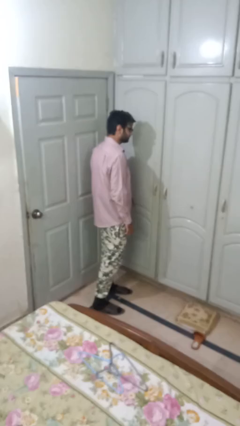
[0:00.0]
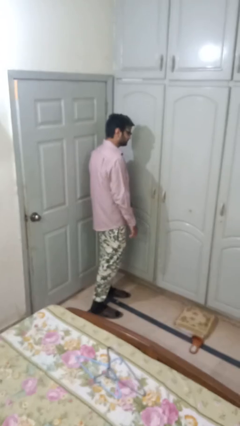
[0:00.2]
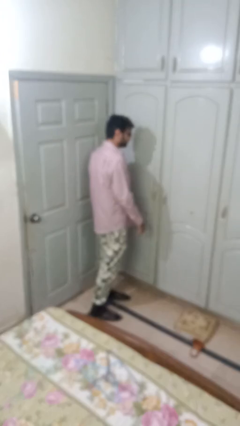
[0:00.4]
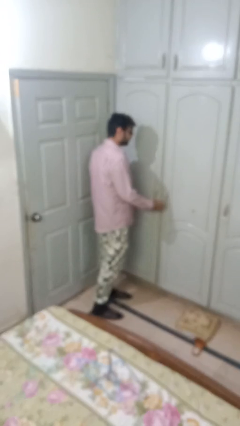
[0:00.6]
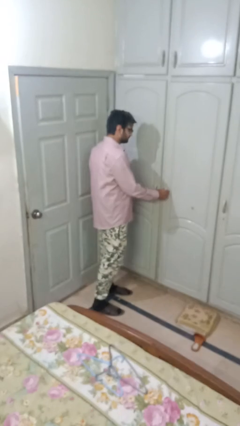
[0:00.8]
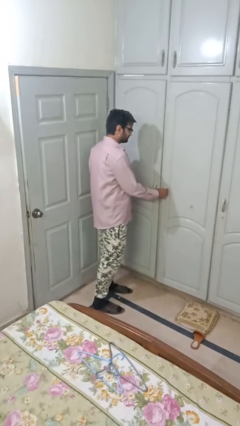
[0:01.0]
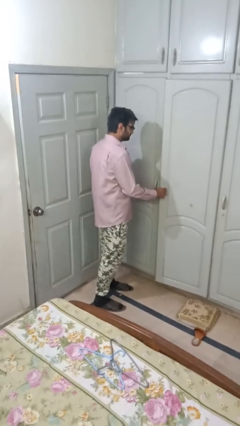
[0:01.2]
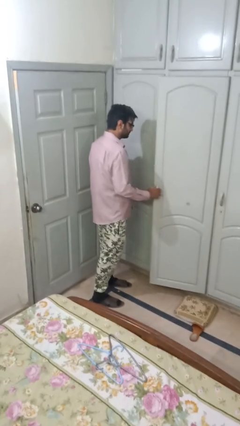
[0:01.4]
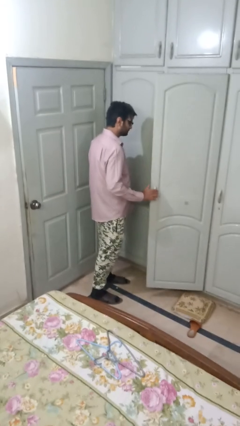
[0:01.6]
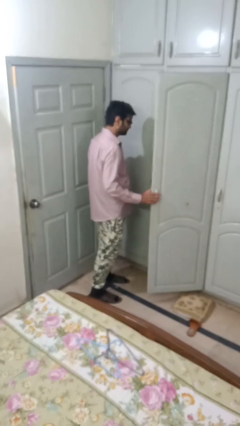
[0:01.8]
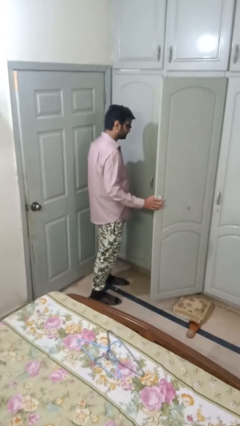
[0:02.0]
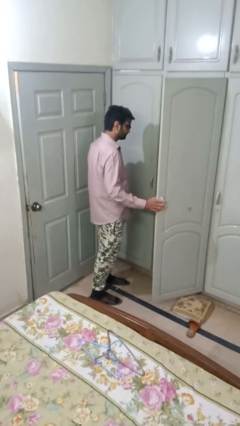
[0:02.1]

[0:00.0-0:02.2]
person opens closet door

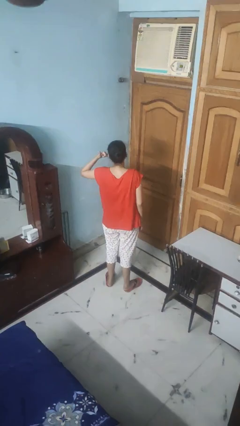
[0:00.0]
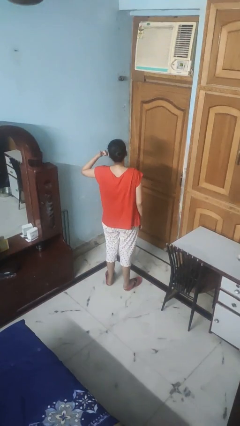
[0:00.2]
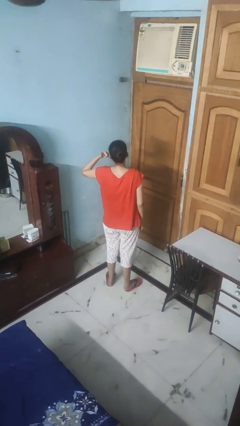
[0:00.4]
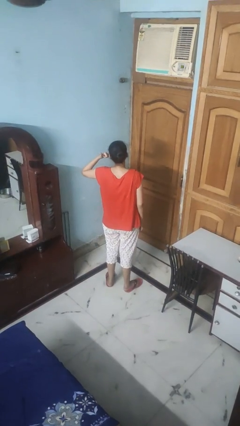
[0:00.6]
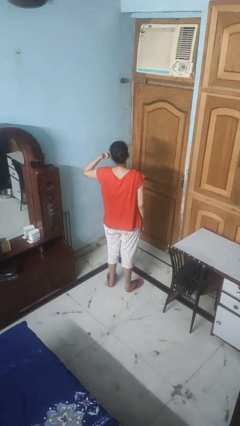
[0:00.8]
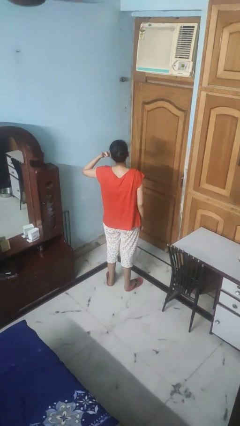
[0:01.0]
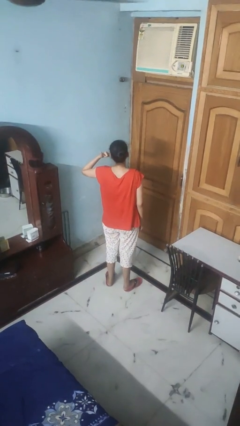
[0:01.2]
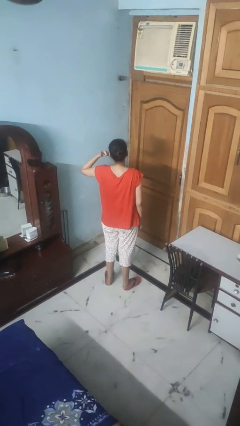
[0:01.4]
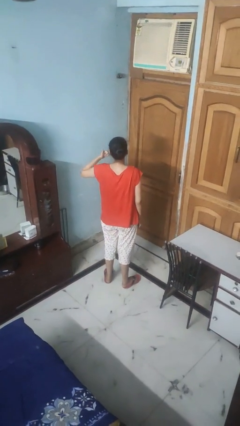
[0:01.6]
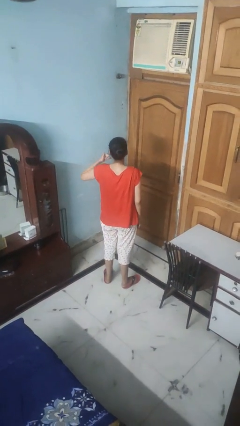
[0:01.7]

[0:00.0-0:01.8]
person gestures call me

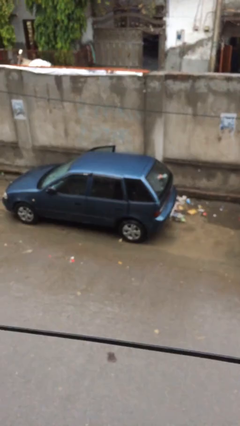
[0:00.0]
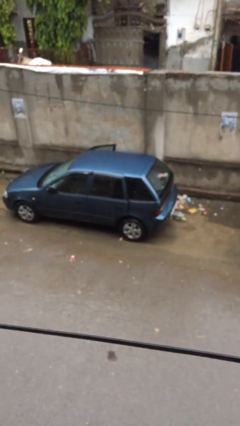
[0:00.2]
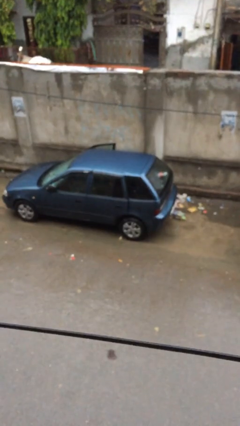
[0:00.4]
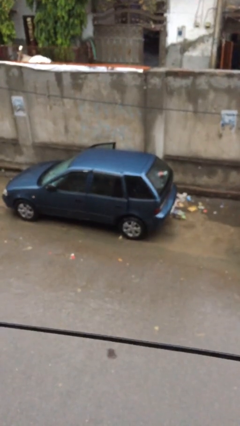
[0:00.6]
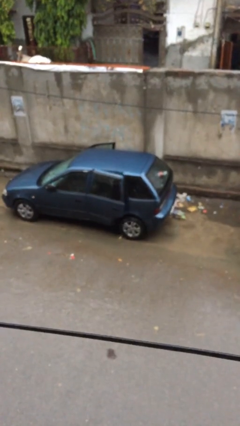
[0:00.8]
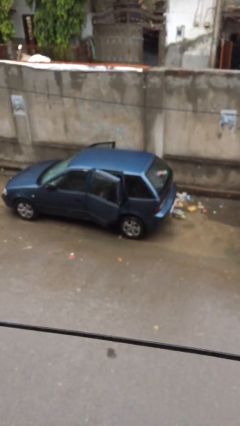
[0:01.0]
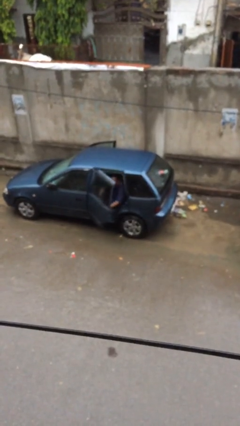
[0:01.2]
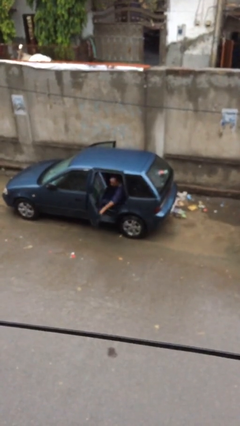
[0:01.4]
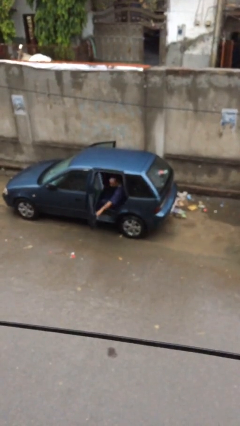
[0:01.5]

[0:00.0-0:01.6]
person opens car door

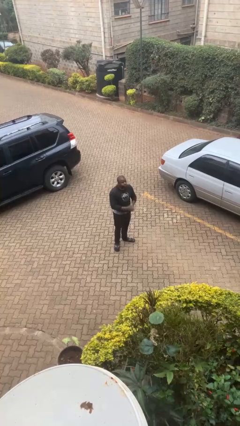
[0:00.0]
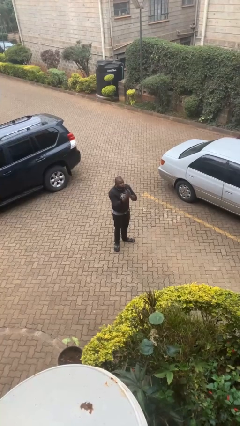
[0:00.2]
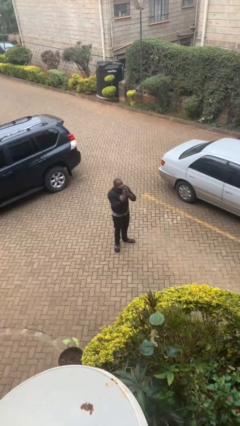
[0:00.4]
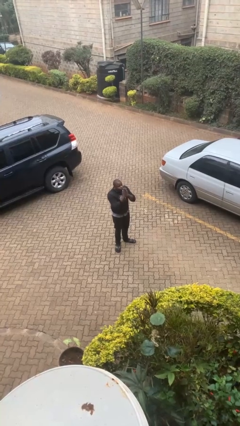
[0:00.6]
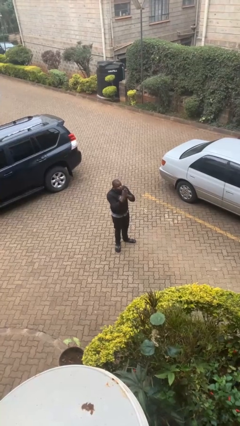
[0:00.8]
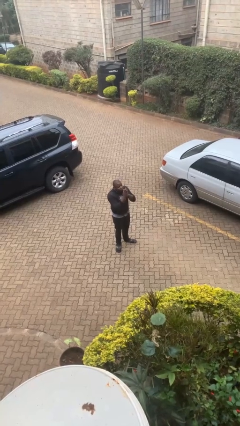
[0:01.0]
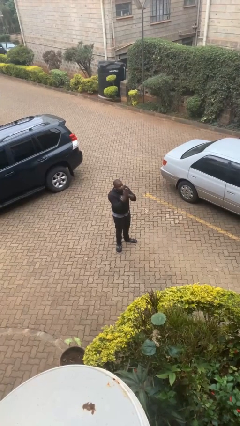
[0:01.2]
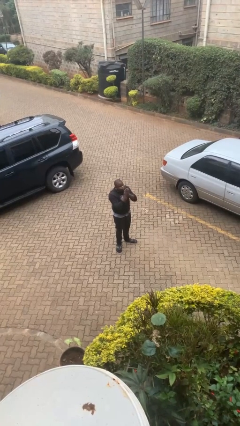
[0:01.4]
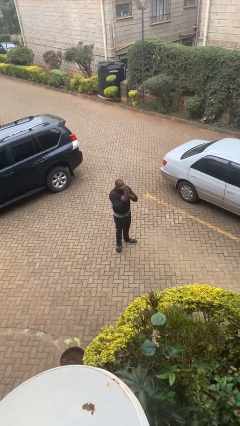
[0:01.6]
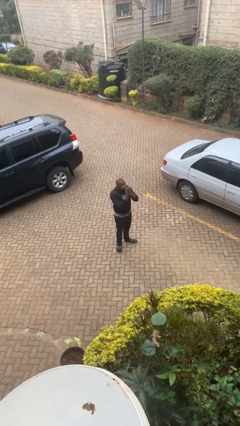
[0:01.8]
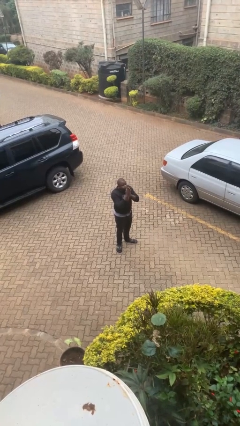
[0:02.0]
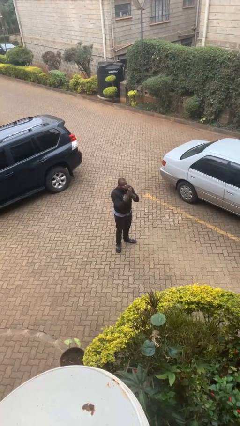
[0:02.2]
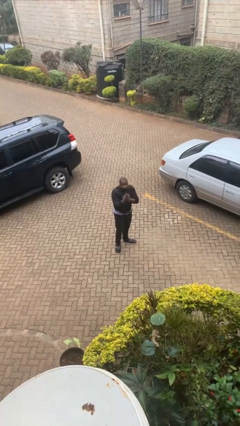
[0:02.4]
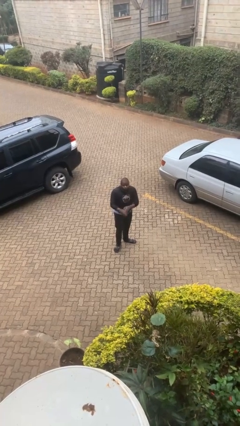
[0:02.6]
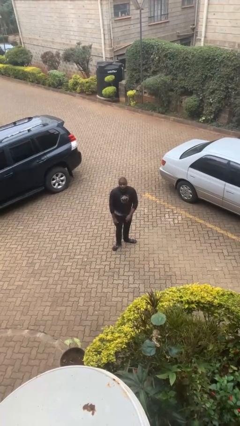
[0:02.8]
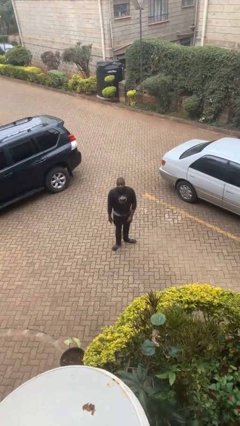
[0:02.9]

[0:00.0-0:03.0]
person blows into hands

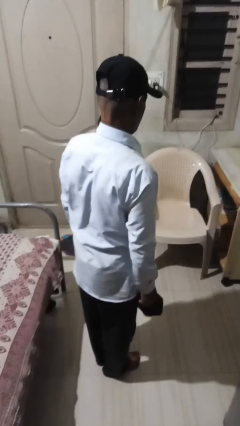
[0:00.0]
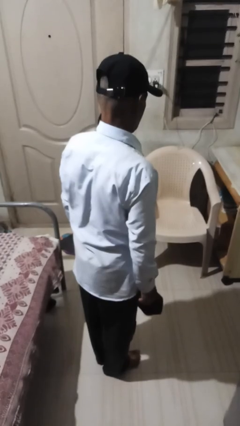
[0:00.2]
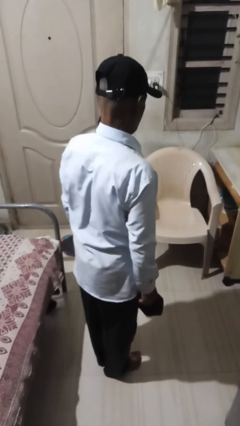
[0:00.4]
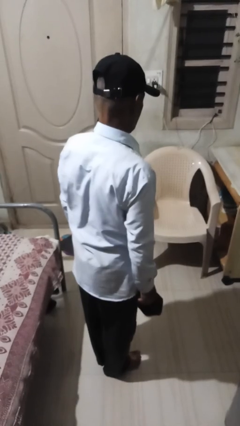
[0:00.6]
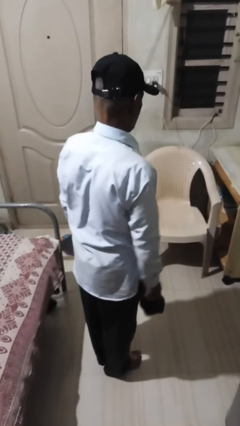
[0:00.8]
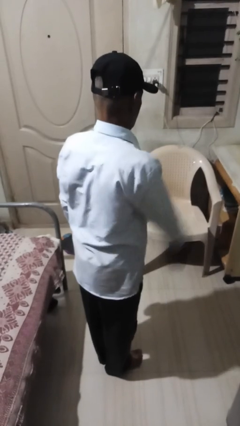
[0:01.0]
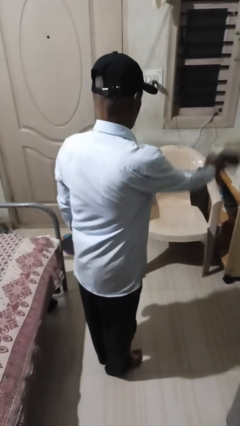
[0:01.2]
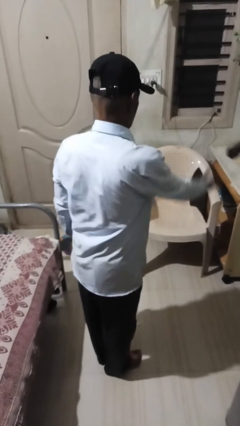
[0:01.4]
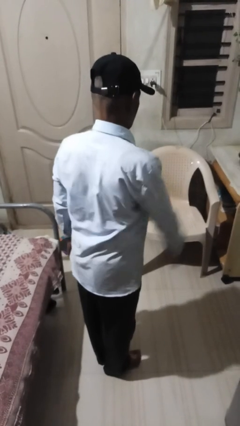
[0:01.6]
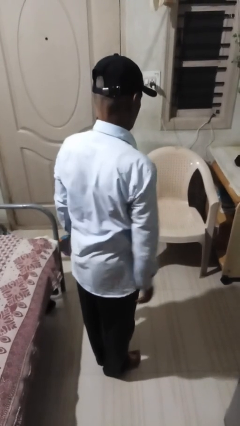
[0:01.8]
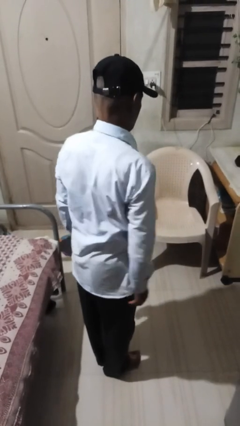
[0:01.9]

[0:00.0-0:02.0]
person throws object on table

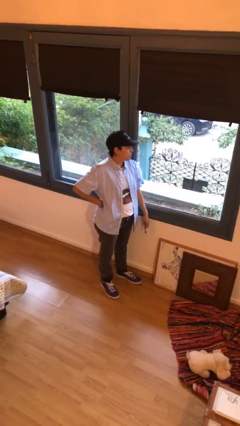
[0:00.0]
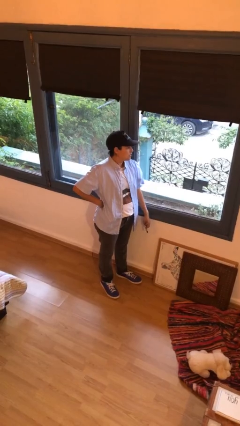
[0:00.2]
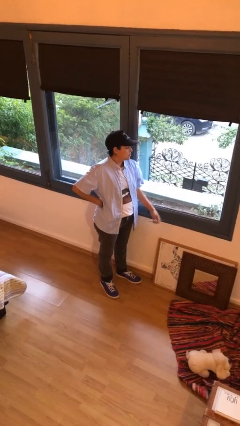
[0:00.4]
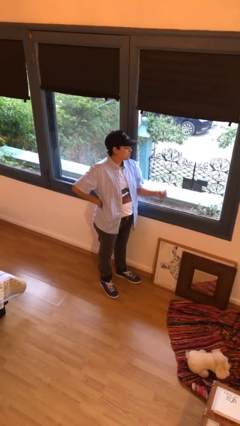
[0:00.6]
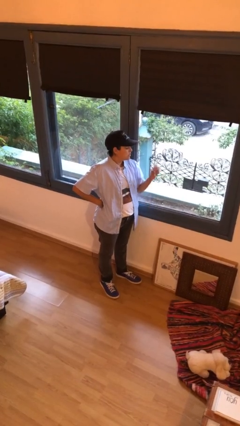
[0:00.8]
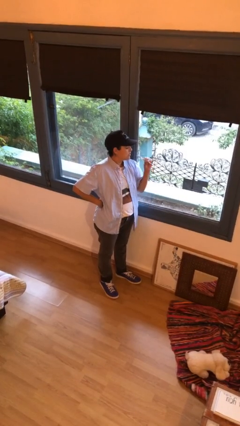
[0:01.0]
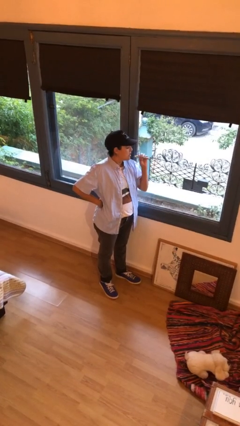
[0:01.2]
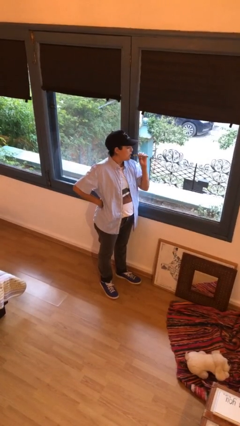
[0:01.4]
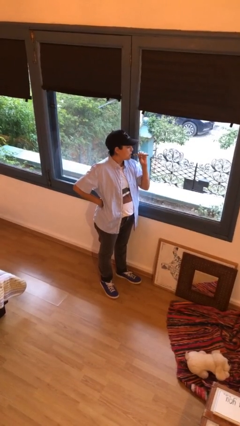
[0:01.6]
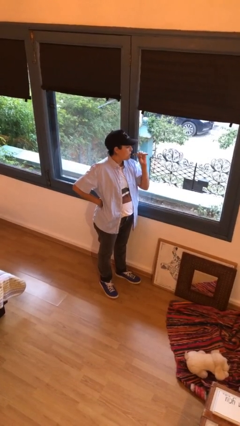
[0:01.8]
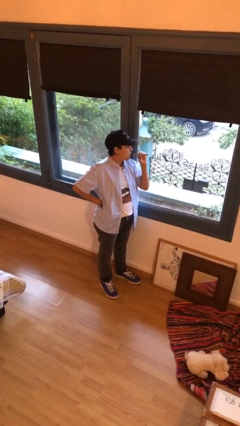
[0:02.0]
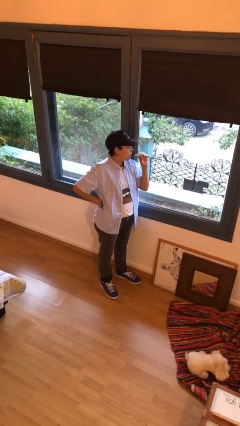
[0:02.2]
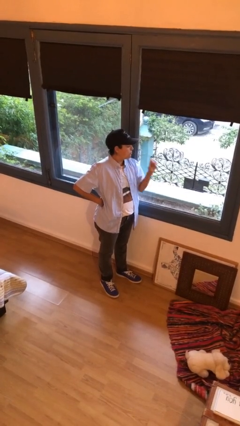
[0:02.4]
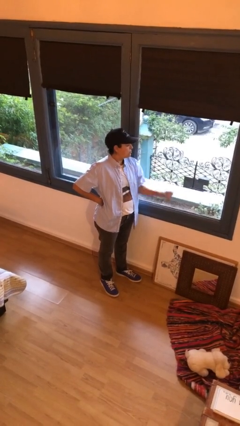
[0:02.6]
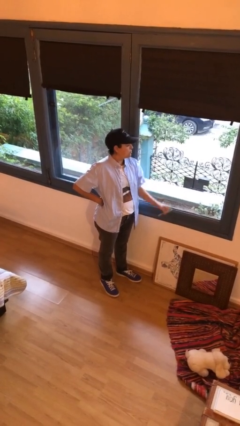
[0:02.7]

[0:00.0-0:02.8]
person vapes

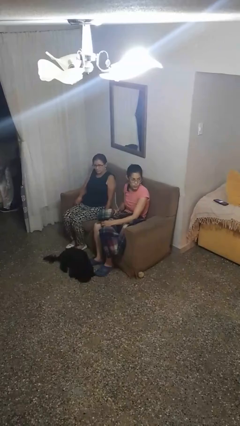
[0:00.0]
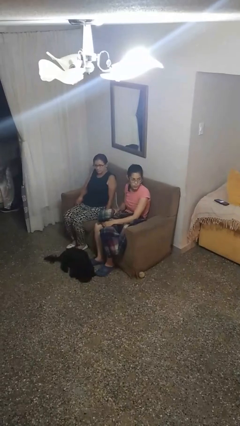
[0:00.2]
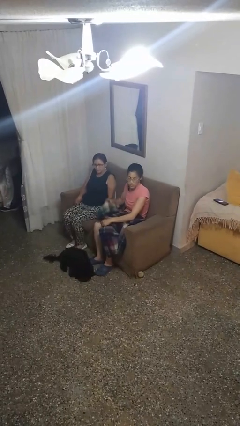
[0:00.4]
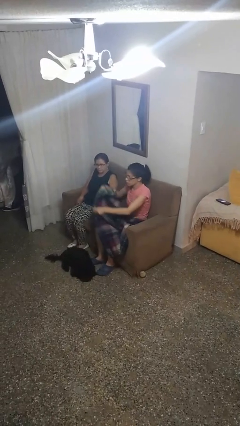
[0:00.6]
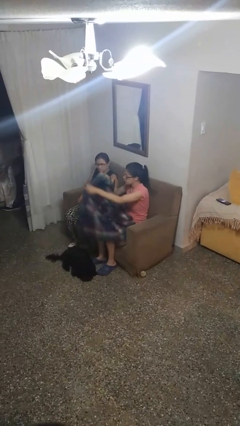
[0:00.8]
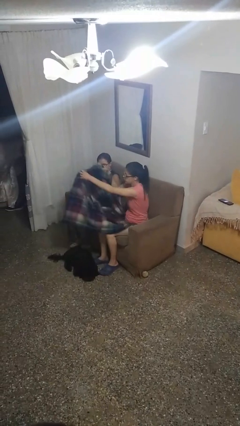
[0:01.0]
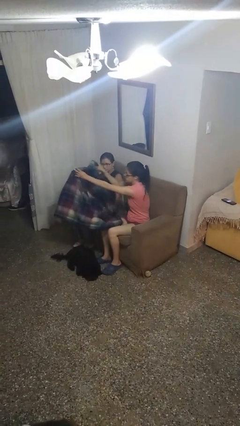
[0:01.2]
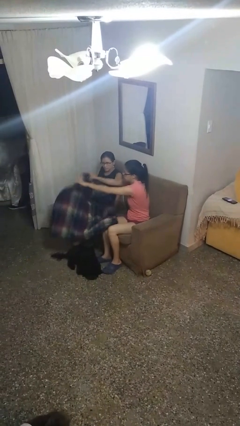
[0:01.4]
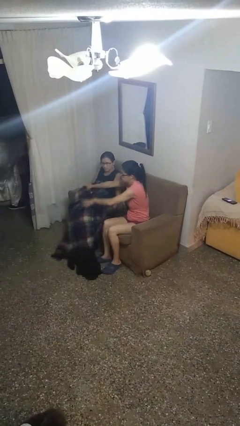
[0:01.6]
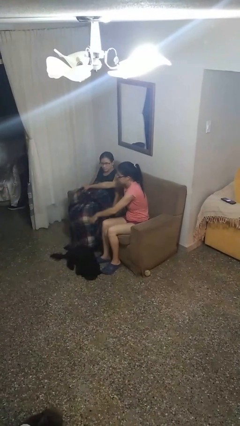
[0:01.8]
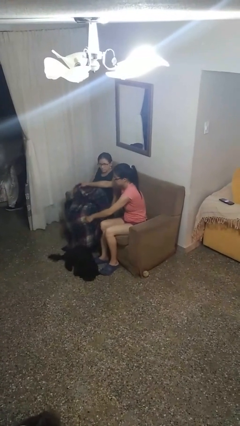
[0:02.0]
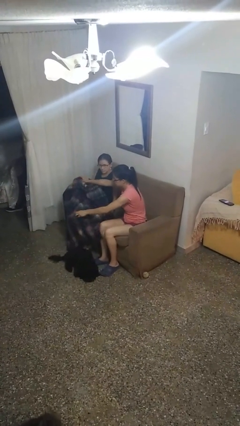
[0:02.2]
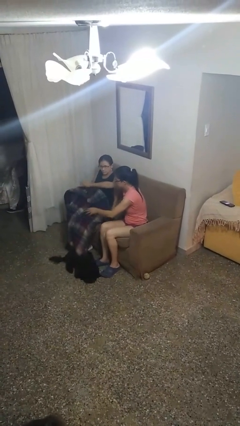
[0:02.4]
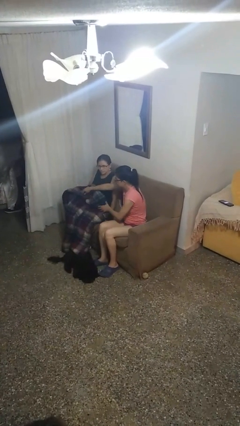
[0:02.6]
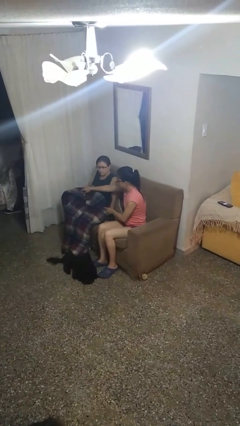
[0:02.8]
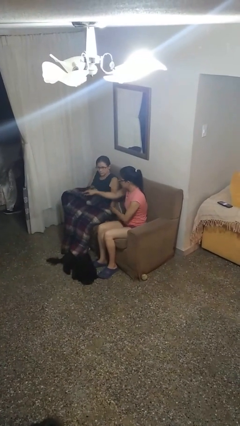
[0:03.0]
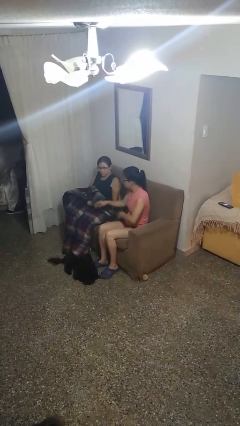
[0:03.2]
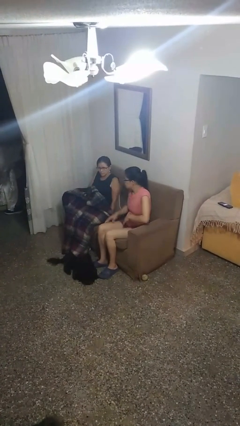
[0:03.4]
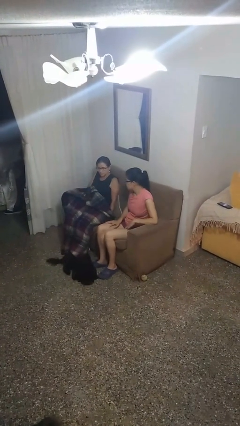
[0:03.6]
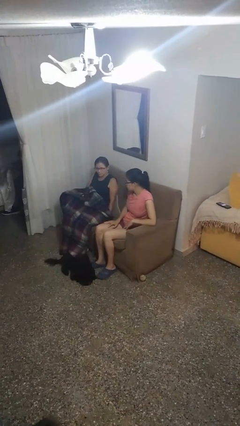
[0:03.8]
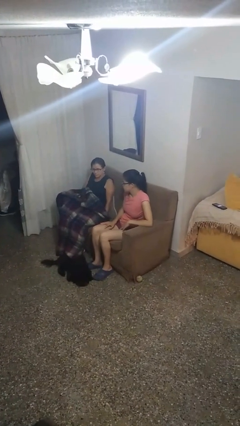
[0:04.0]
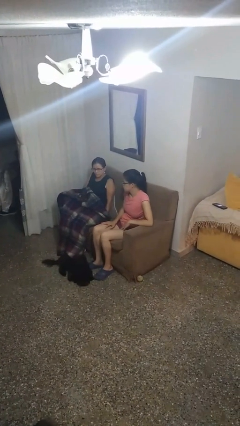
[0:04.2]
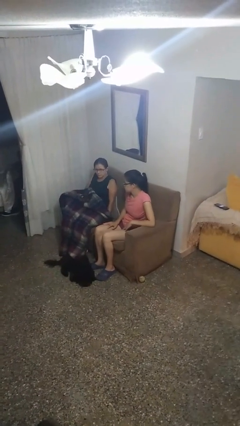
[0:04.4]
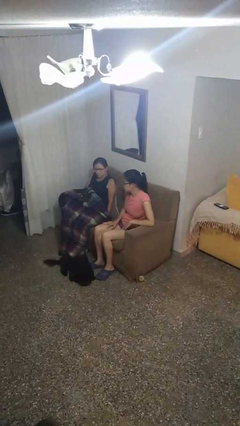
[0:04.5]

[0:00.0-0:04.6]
person covers friend with blanket
